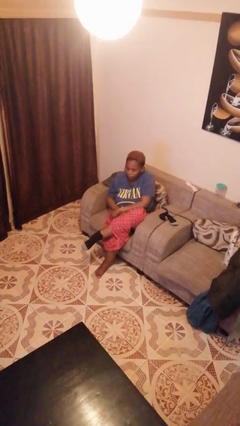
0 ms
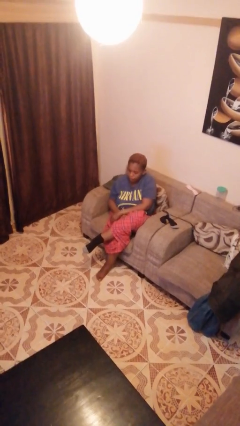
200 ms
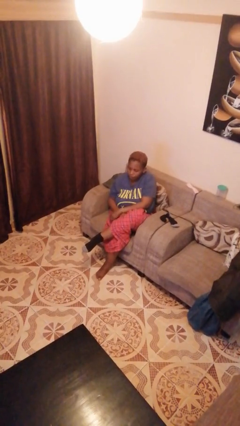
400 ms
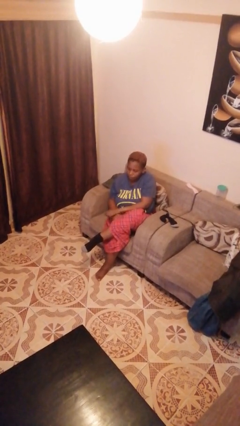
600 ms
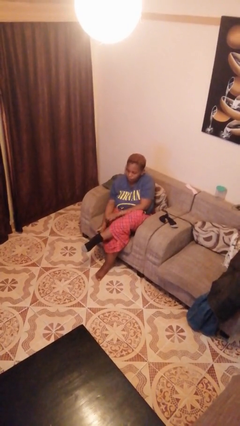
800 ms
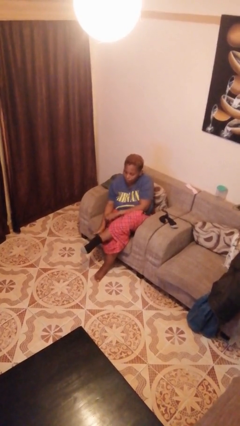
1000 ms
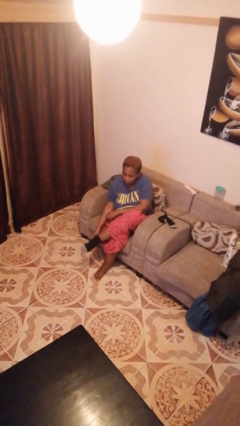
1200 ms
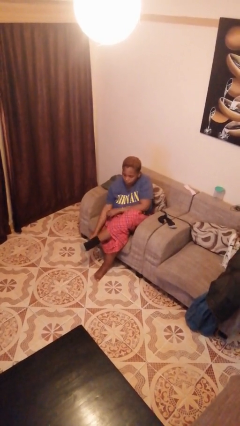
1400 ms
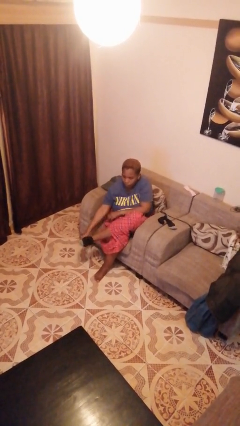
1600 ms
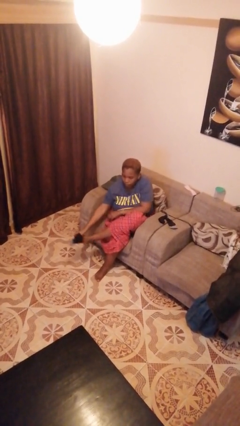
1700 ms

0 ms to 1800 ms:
person takes off socks

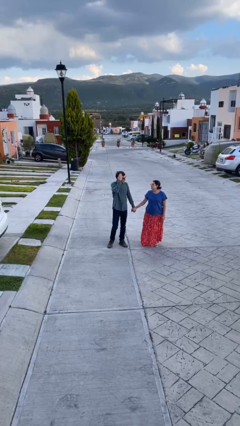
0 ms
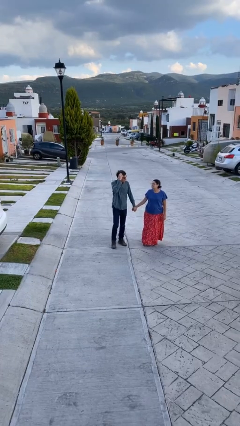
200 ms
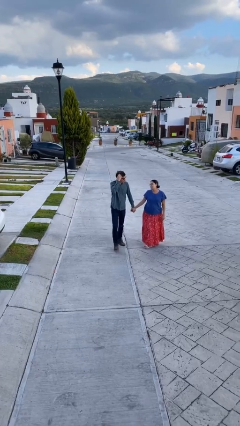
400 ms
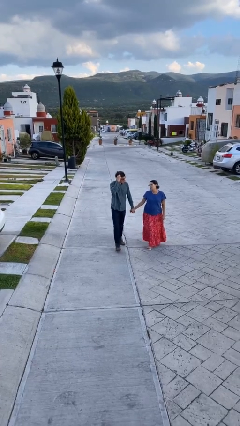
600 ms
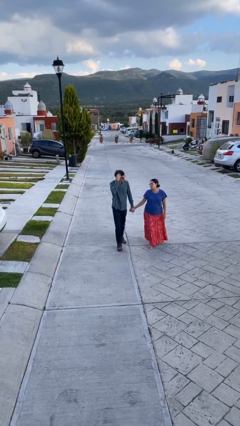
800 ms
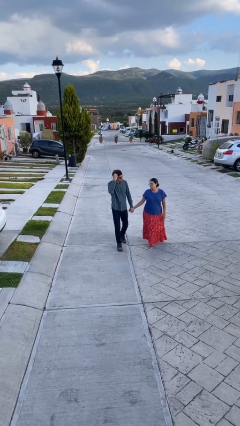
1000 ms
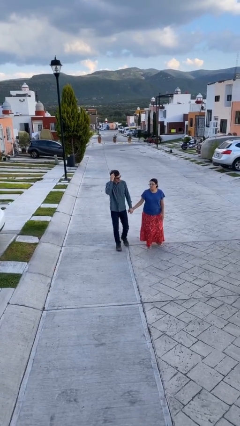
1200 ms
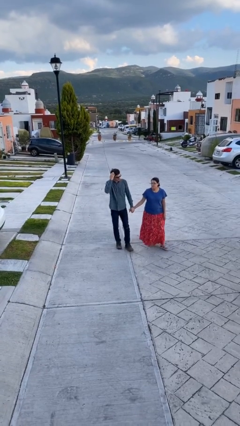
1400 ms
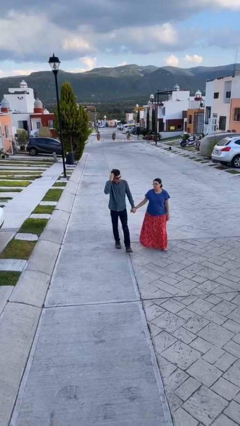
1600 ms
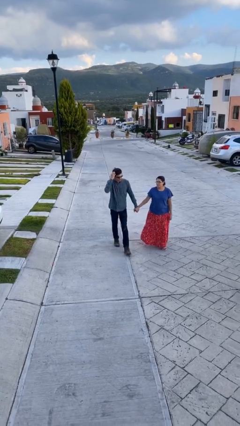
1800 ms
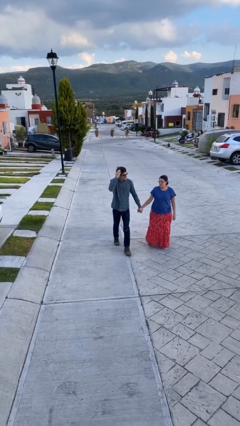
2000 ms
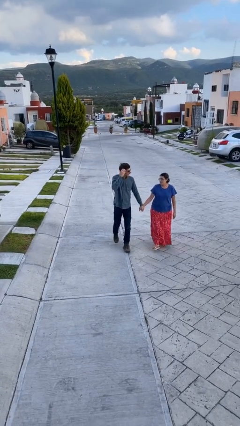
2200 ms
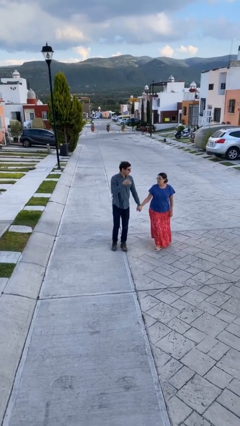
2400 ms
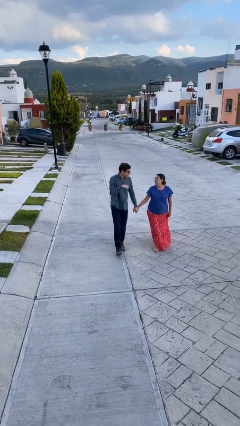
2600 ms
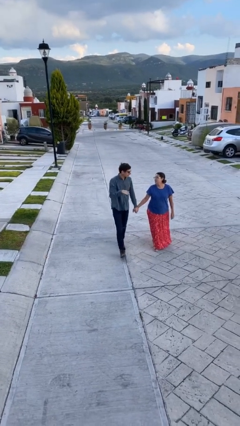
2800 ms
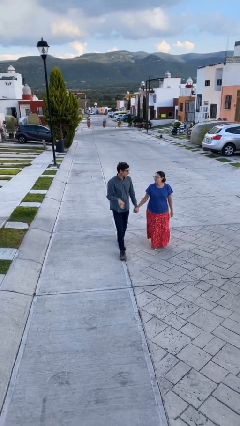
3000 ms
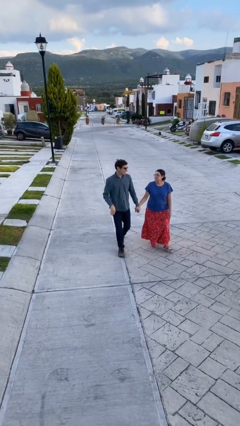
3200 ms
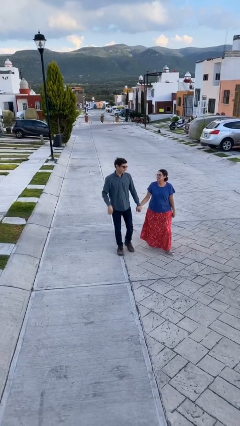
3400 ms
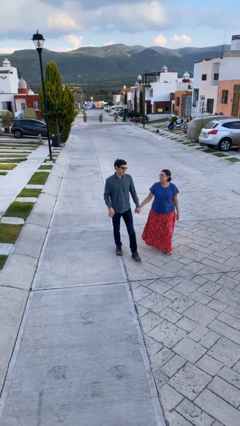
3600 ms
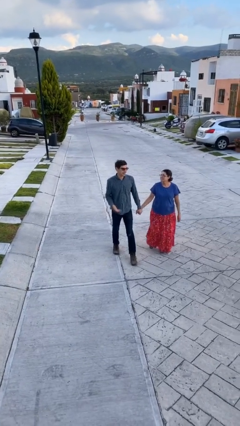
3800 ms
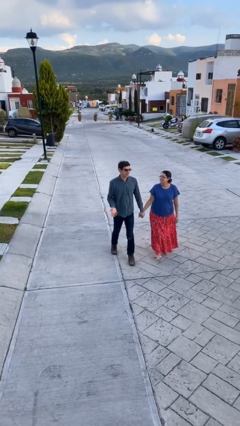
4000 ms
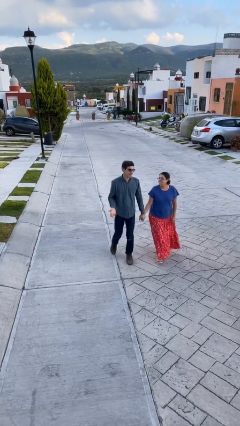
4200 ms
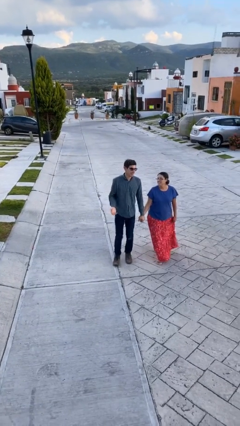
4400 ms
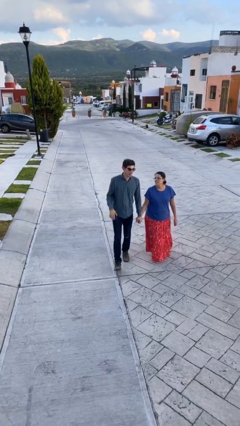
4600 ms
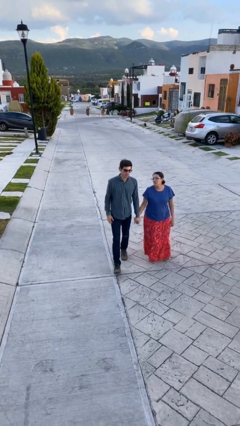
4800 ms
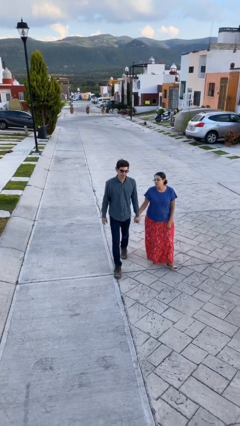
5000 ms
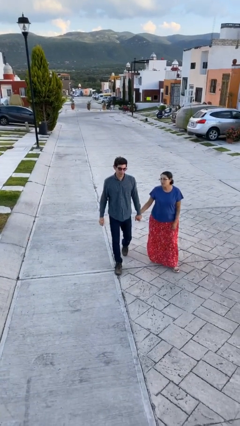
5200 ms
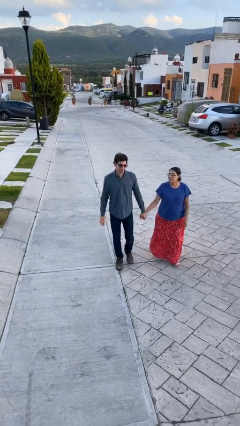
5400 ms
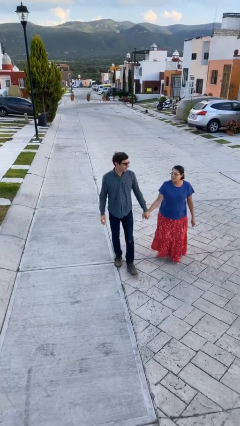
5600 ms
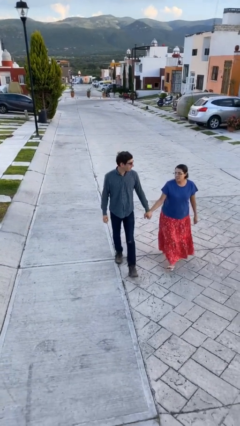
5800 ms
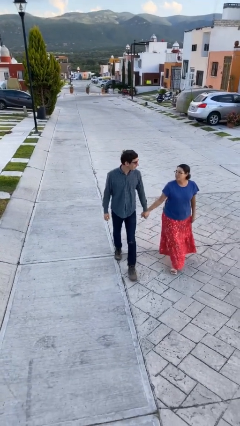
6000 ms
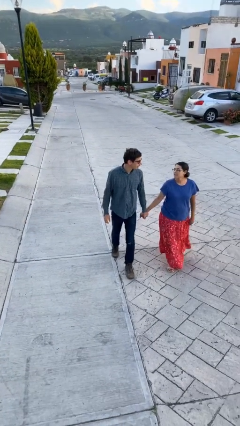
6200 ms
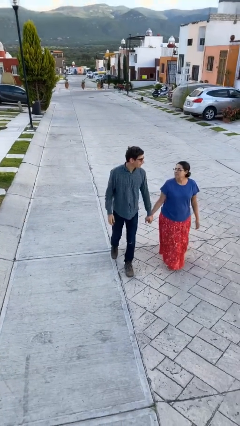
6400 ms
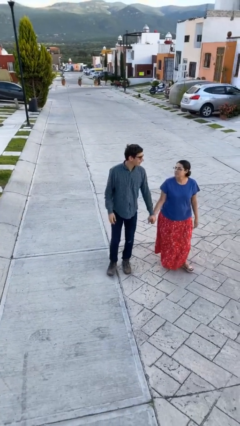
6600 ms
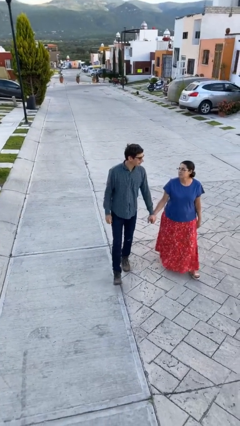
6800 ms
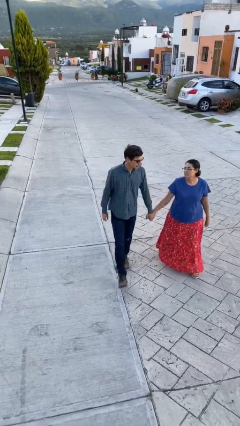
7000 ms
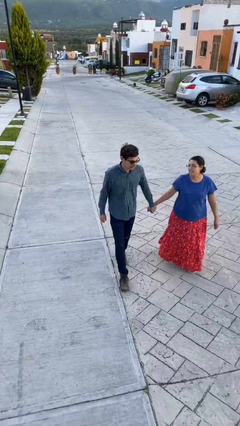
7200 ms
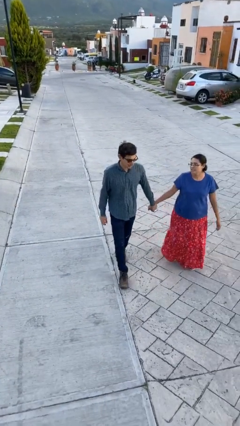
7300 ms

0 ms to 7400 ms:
person holds hand

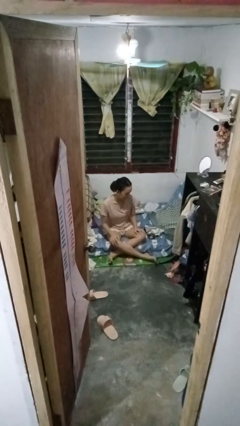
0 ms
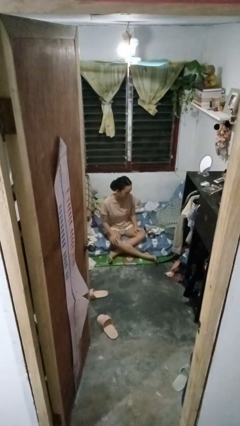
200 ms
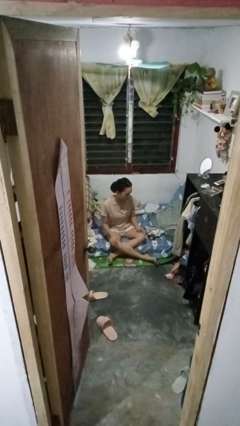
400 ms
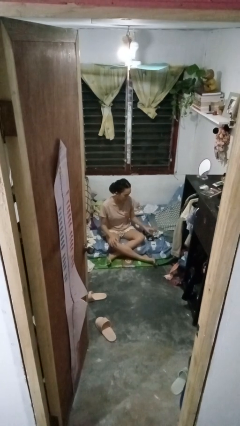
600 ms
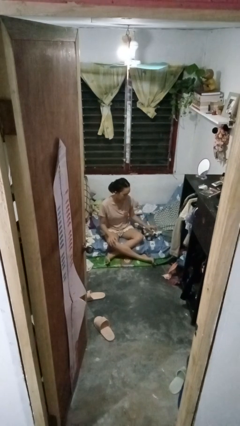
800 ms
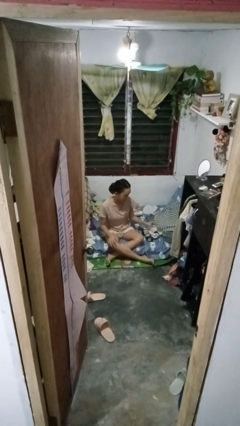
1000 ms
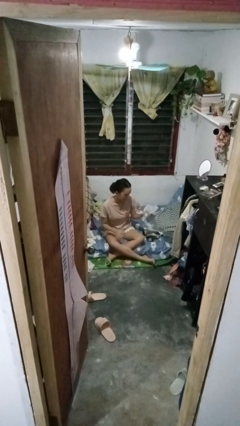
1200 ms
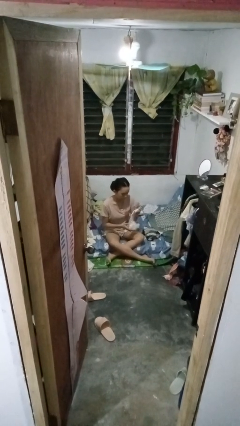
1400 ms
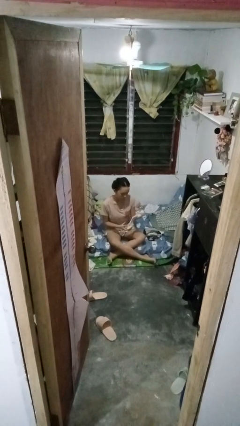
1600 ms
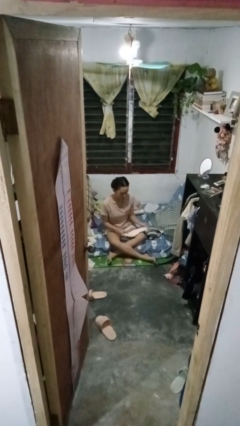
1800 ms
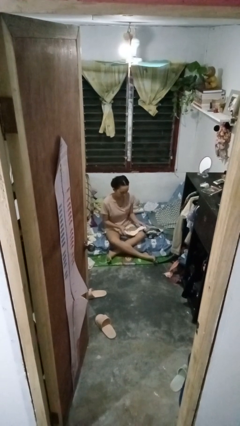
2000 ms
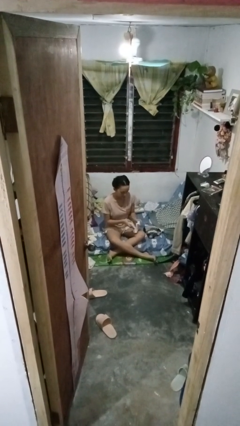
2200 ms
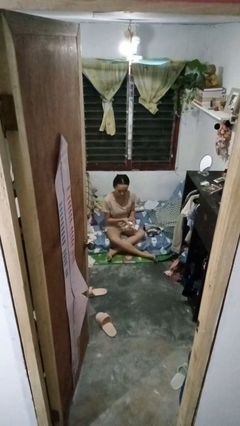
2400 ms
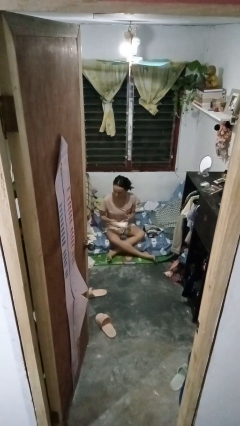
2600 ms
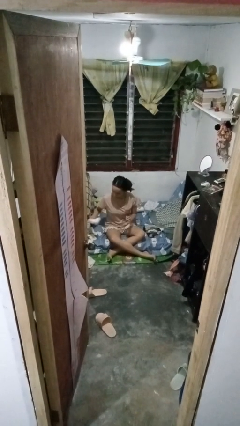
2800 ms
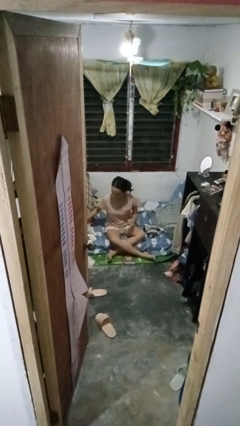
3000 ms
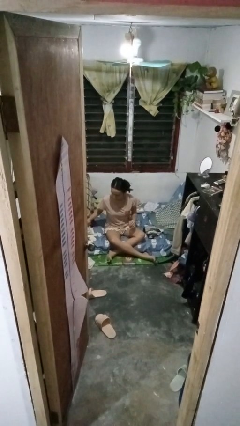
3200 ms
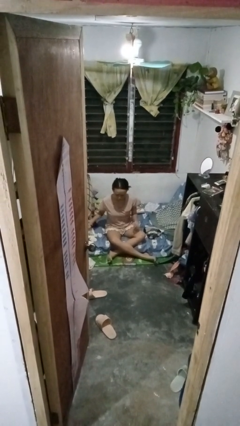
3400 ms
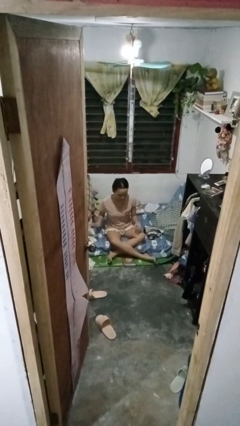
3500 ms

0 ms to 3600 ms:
person folds socks

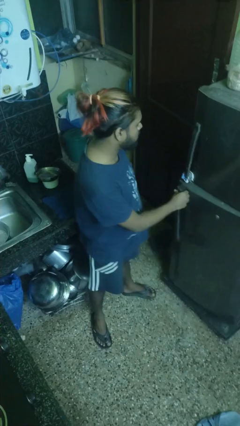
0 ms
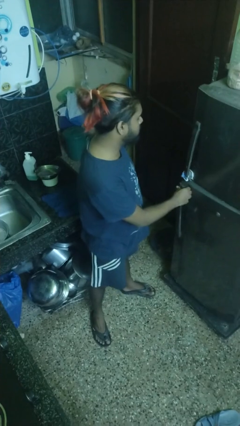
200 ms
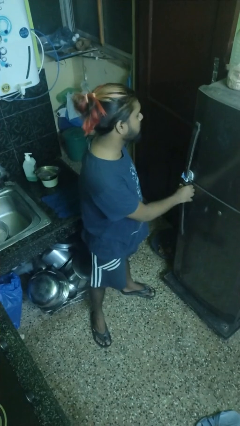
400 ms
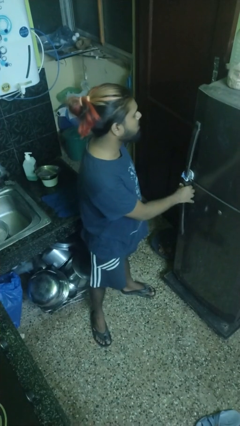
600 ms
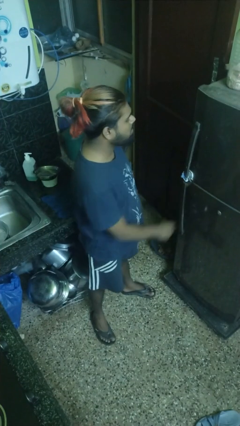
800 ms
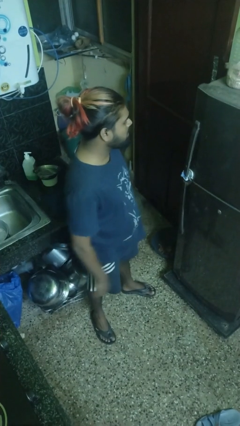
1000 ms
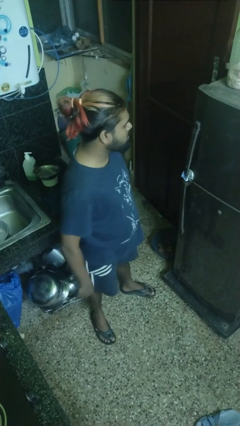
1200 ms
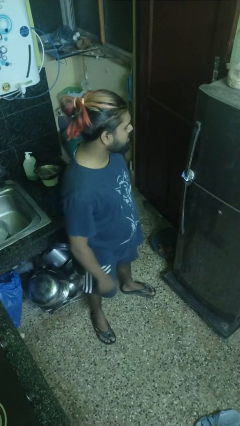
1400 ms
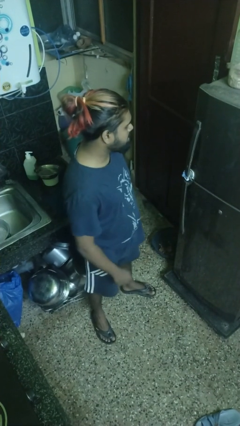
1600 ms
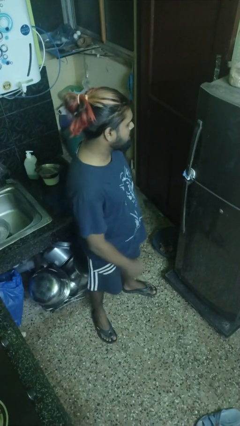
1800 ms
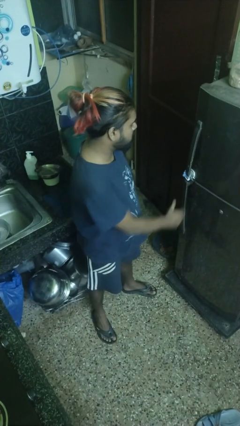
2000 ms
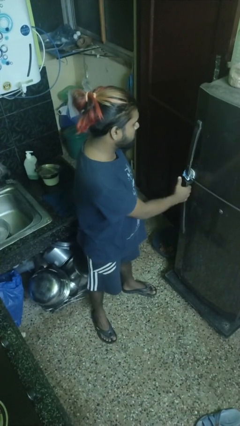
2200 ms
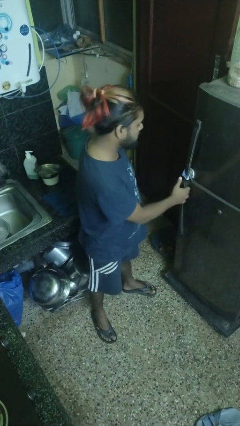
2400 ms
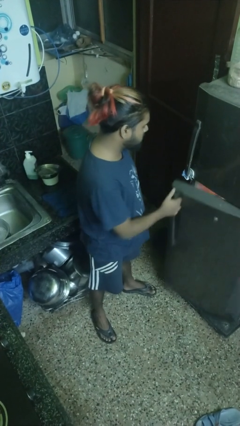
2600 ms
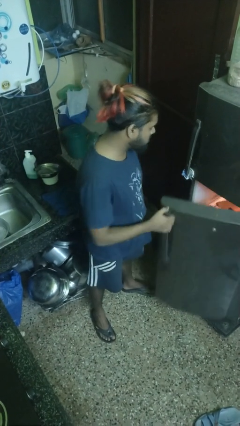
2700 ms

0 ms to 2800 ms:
person closes refrigerator

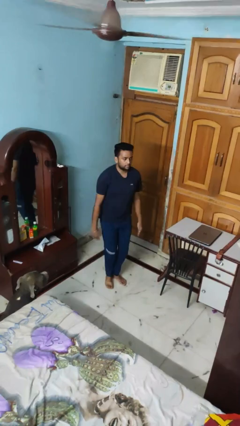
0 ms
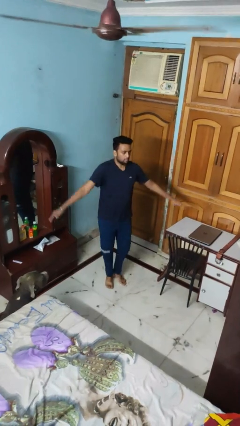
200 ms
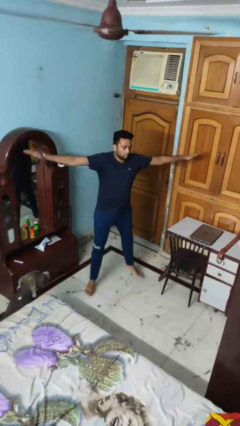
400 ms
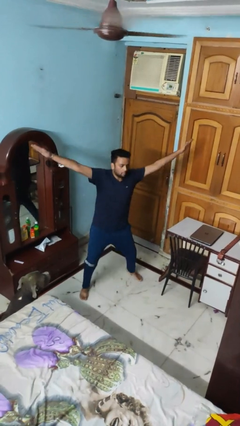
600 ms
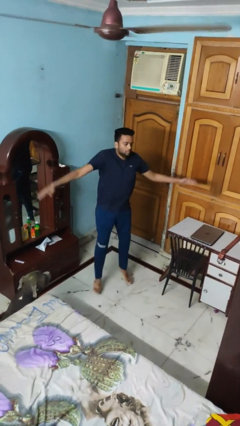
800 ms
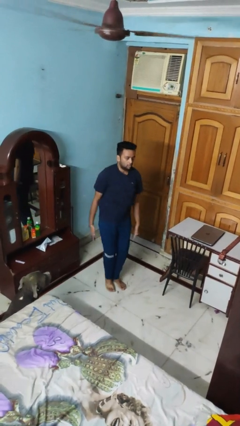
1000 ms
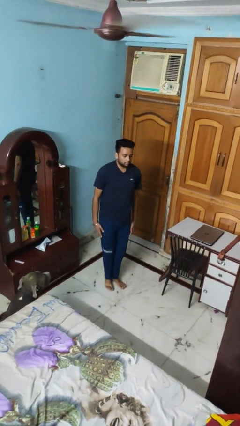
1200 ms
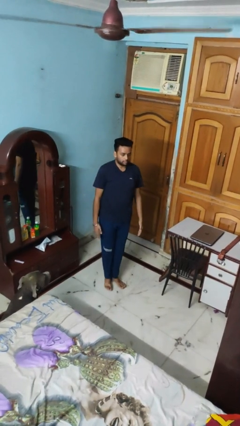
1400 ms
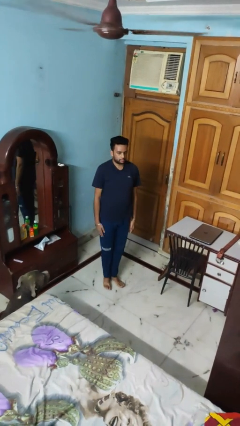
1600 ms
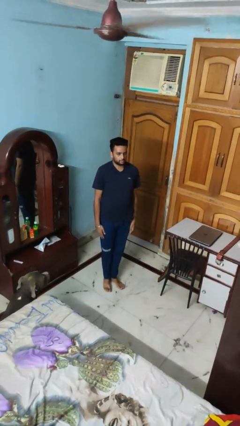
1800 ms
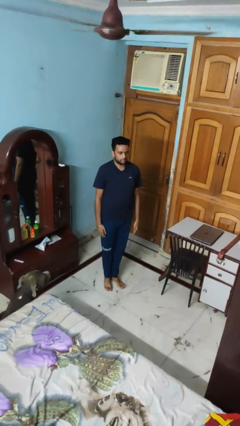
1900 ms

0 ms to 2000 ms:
person exercises with jumping jacks
